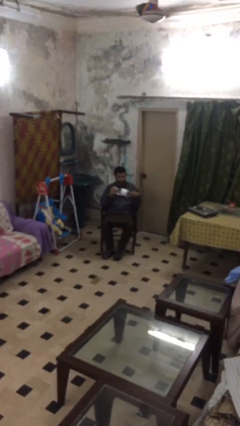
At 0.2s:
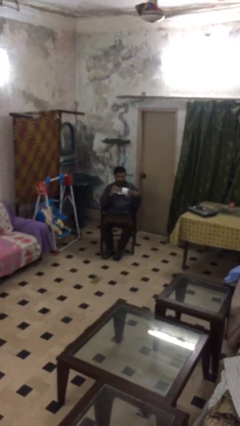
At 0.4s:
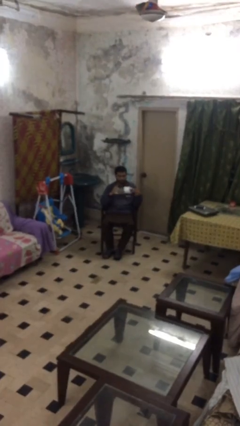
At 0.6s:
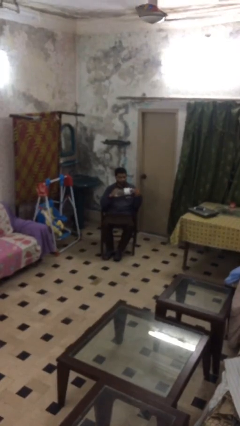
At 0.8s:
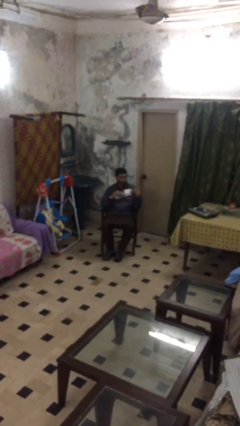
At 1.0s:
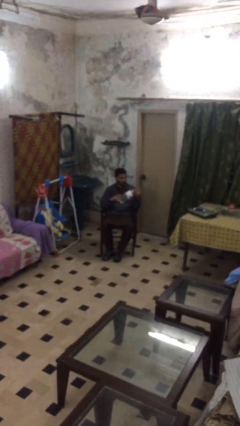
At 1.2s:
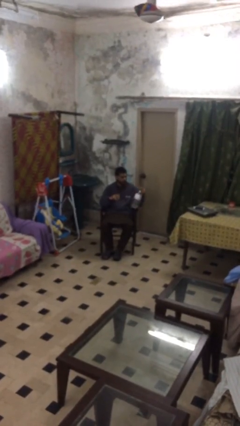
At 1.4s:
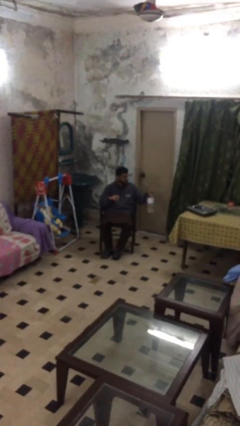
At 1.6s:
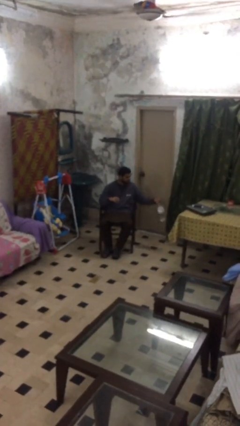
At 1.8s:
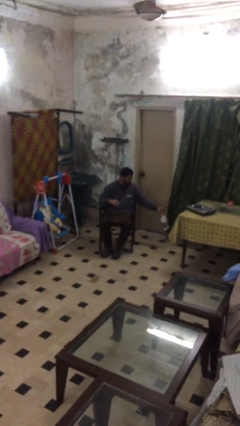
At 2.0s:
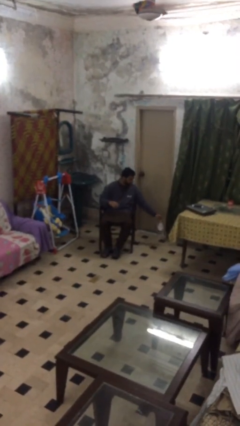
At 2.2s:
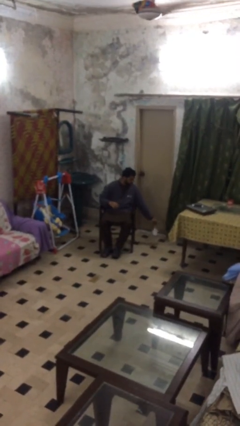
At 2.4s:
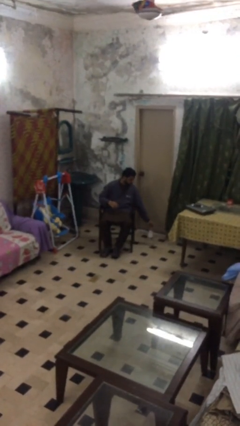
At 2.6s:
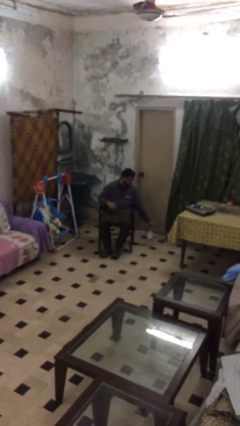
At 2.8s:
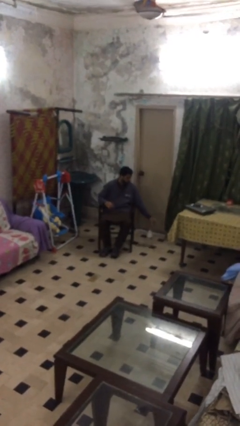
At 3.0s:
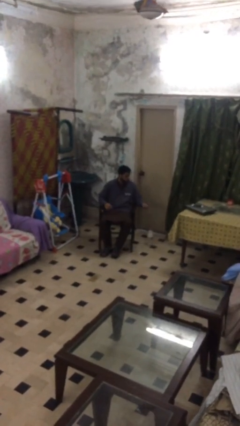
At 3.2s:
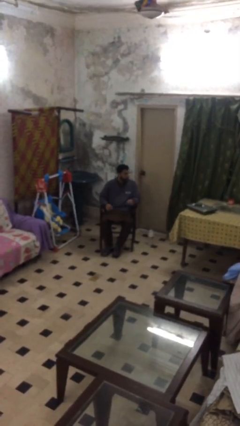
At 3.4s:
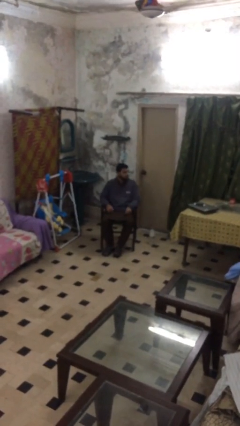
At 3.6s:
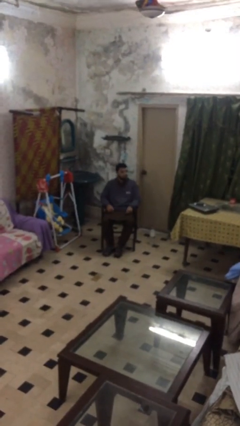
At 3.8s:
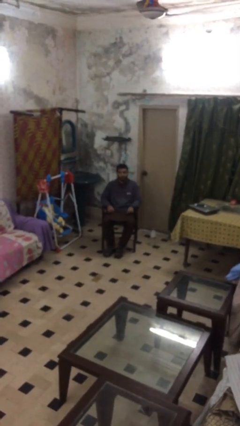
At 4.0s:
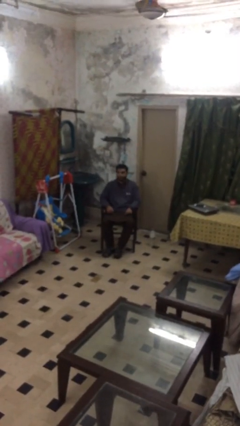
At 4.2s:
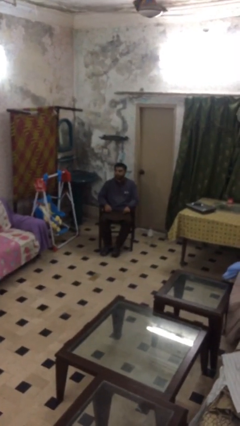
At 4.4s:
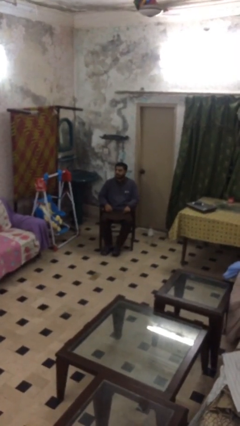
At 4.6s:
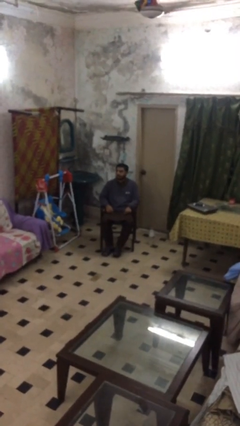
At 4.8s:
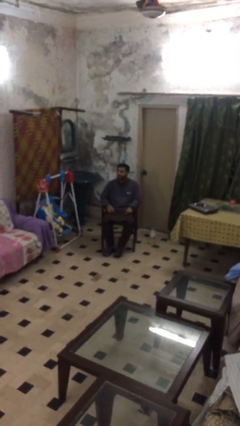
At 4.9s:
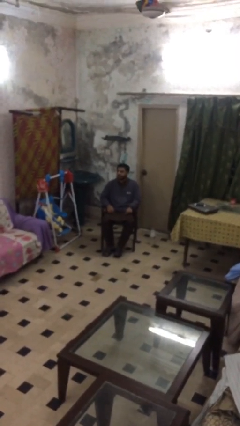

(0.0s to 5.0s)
person puts down object on floor

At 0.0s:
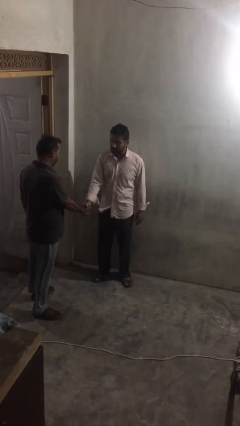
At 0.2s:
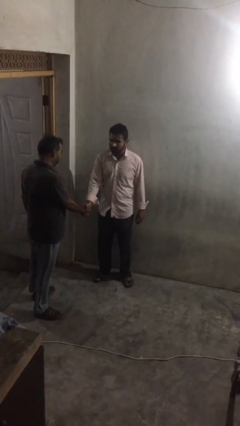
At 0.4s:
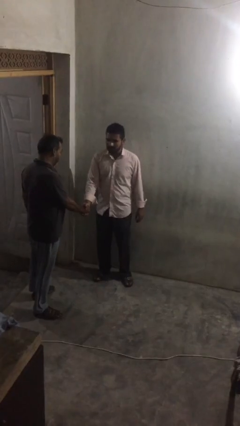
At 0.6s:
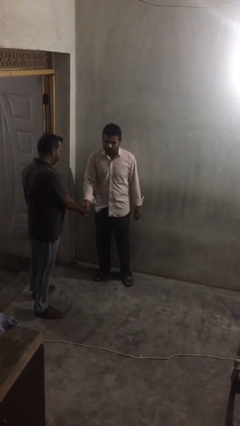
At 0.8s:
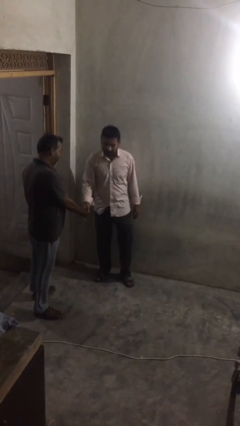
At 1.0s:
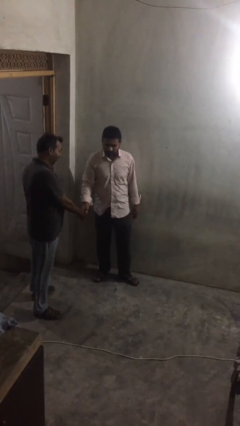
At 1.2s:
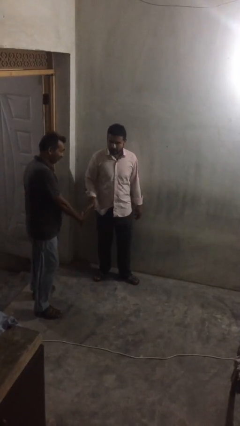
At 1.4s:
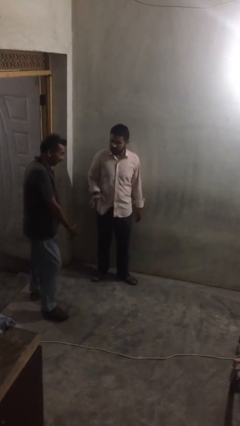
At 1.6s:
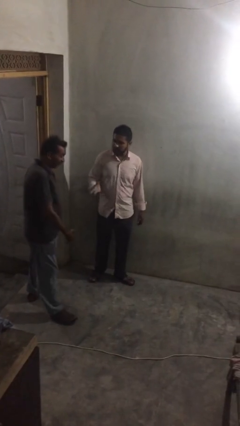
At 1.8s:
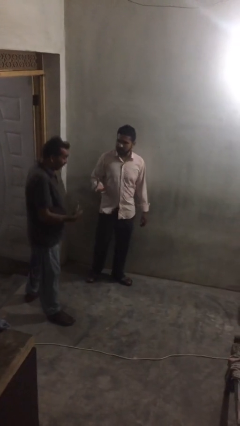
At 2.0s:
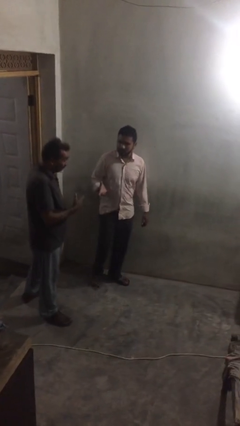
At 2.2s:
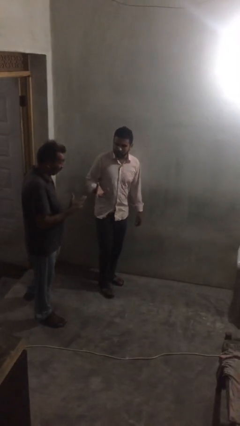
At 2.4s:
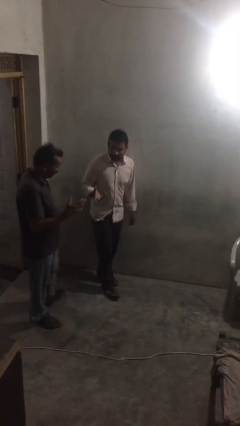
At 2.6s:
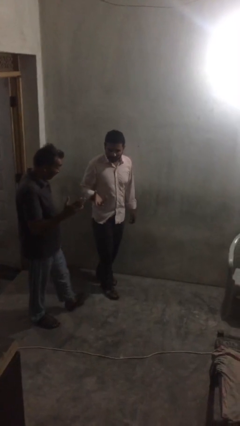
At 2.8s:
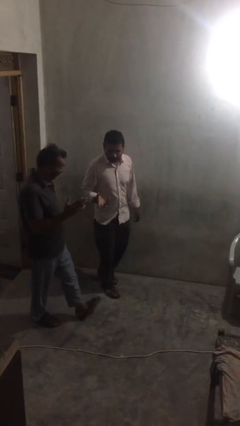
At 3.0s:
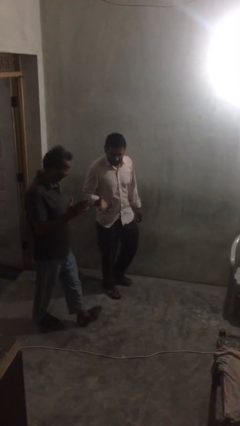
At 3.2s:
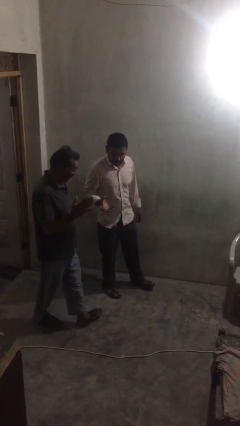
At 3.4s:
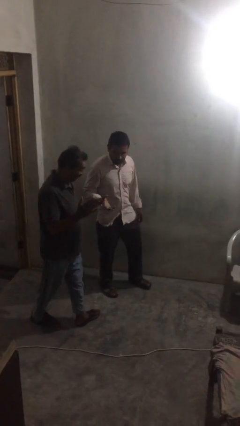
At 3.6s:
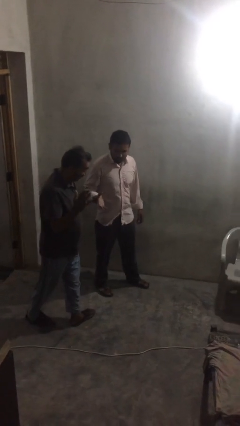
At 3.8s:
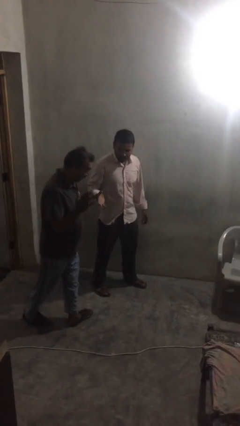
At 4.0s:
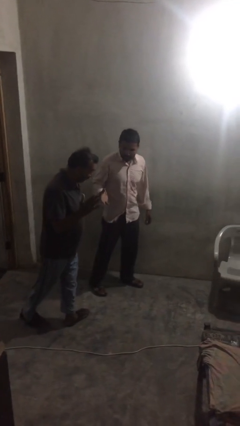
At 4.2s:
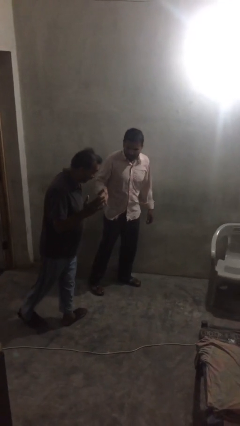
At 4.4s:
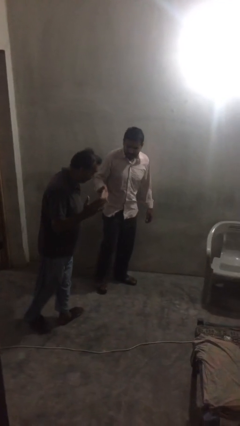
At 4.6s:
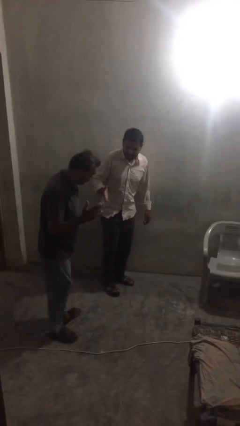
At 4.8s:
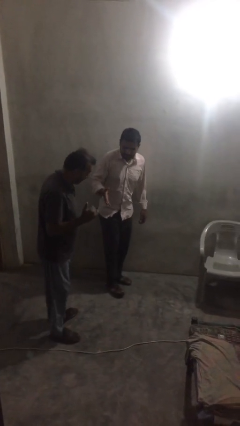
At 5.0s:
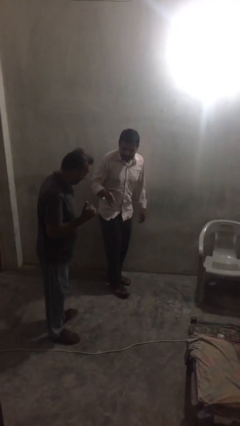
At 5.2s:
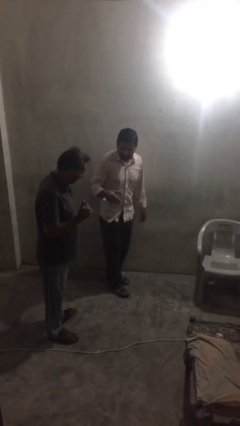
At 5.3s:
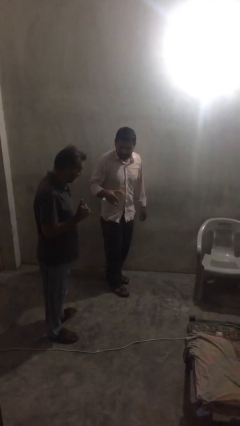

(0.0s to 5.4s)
person talks to person

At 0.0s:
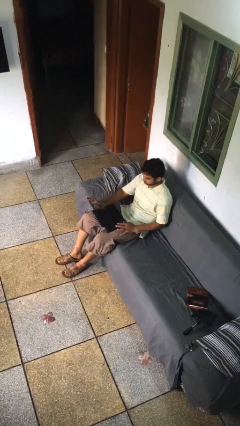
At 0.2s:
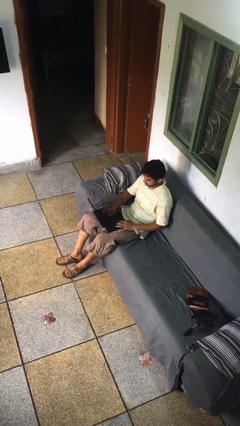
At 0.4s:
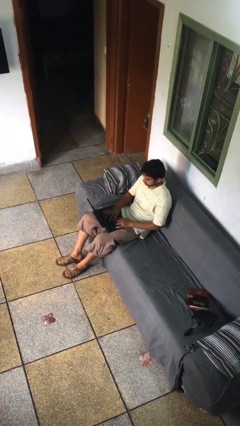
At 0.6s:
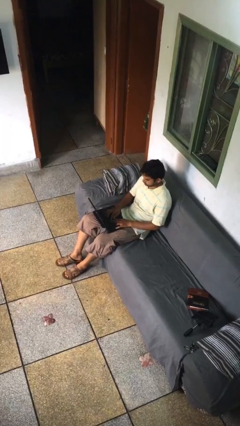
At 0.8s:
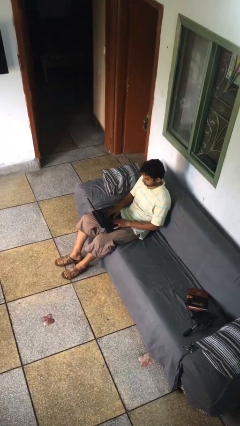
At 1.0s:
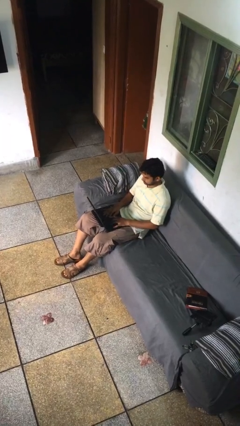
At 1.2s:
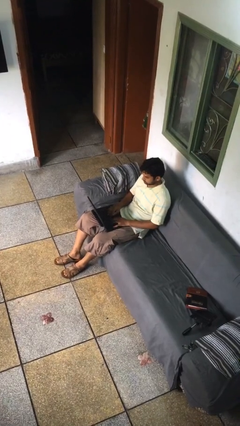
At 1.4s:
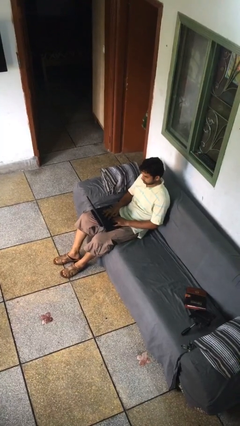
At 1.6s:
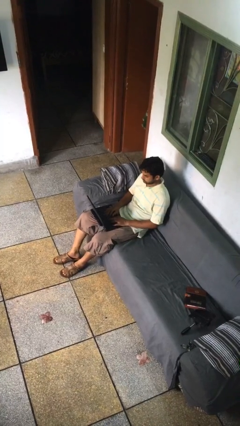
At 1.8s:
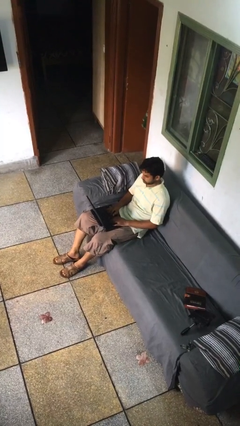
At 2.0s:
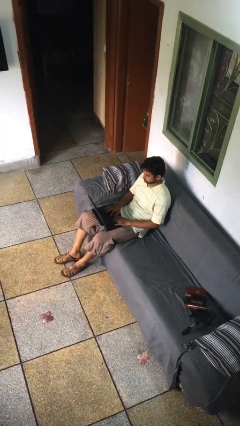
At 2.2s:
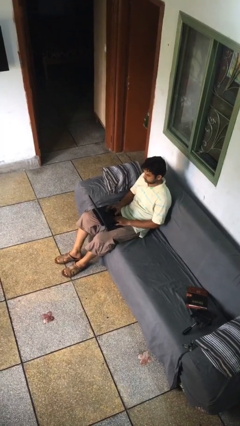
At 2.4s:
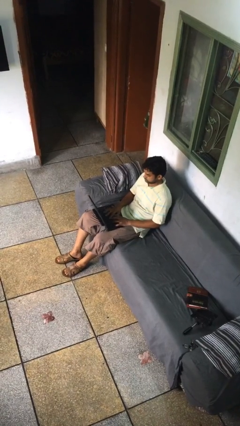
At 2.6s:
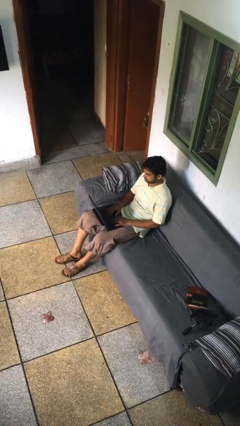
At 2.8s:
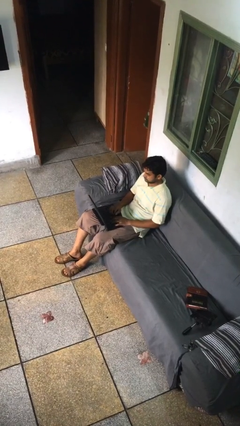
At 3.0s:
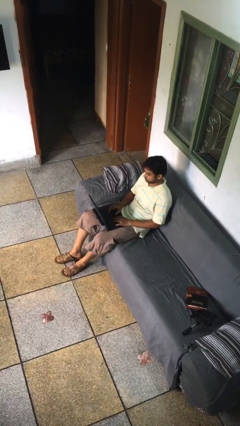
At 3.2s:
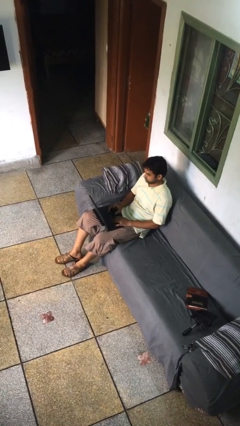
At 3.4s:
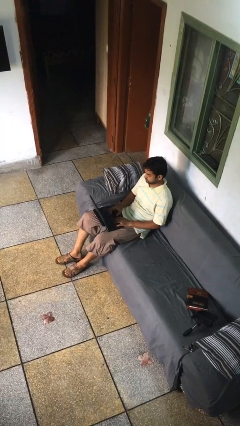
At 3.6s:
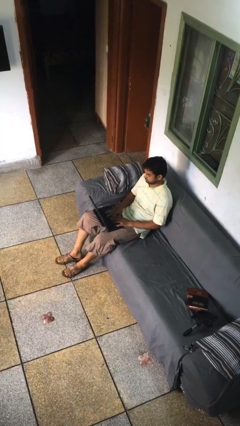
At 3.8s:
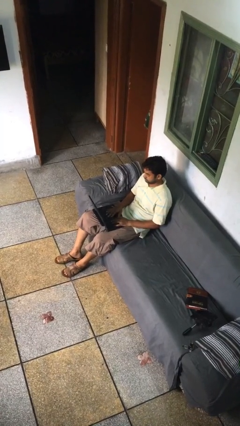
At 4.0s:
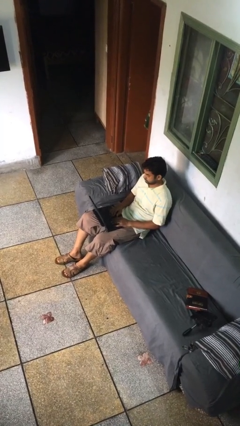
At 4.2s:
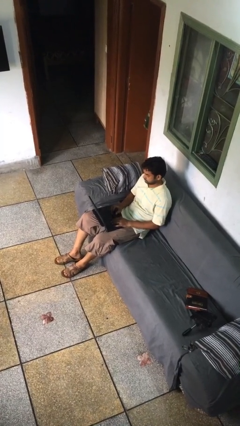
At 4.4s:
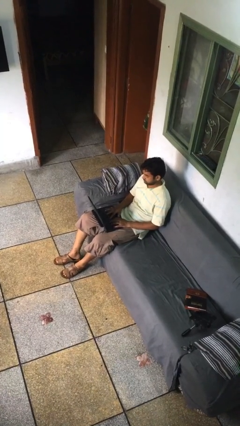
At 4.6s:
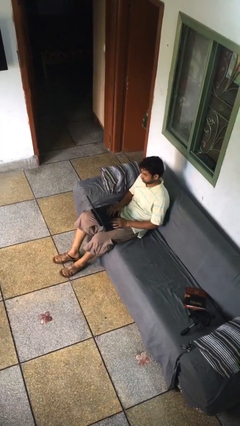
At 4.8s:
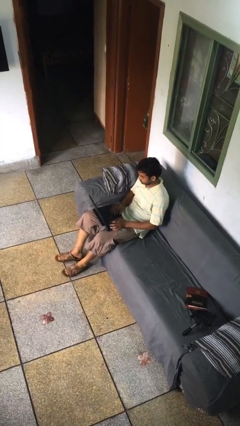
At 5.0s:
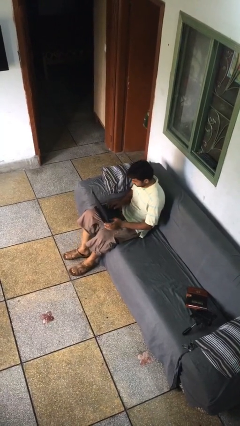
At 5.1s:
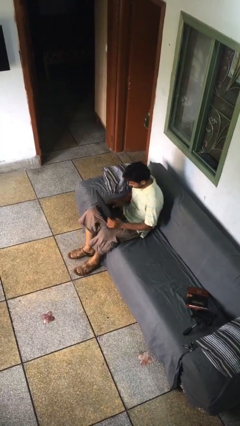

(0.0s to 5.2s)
person interacts with laptop

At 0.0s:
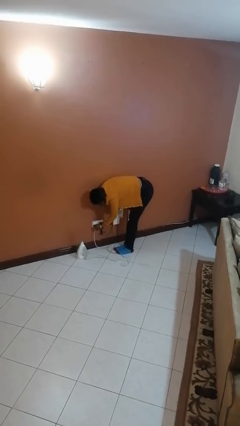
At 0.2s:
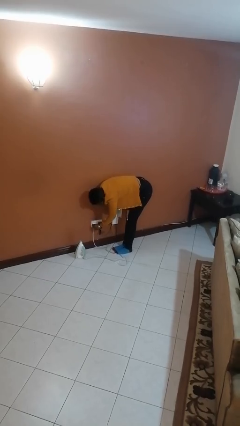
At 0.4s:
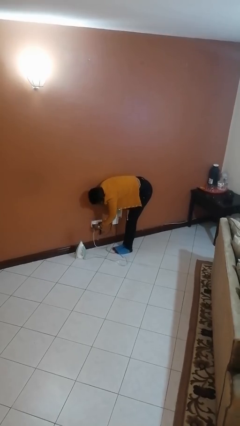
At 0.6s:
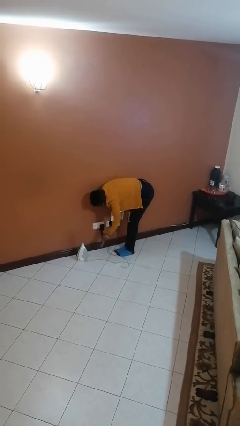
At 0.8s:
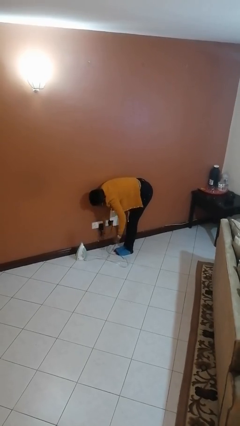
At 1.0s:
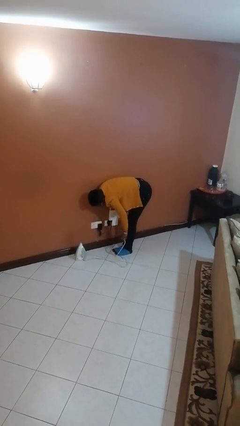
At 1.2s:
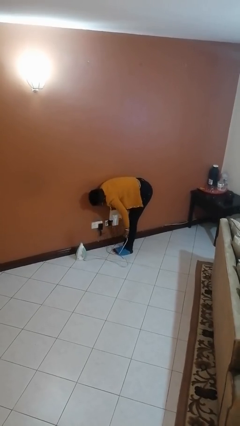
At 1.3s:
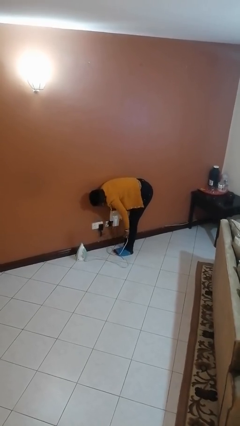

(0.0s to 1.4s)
person unplugs from electrical socket

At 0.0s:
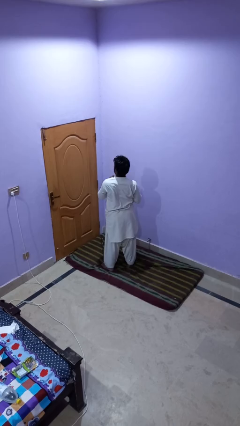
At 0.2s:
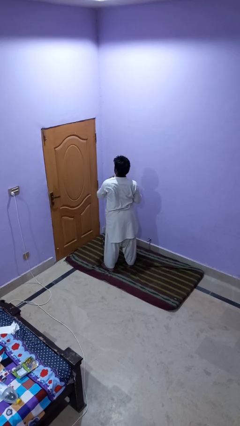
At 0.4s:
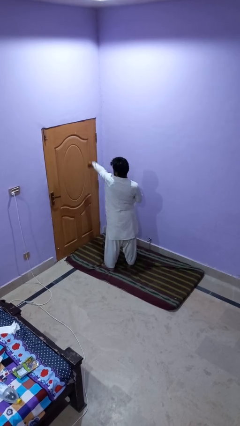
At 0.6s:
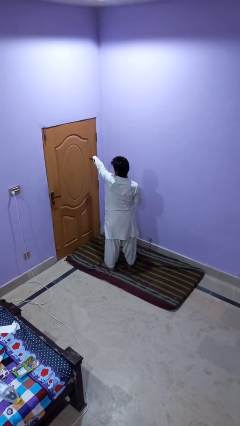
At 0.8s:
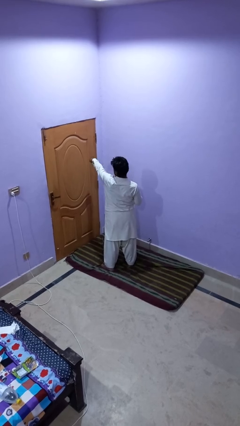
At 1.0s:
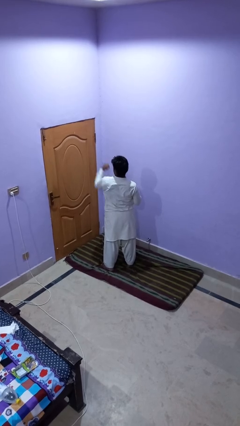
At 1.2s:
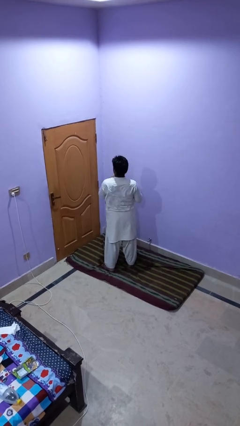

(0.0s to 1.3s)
person punches
